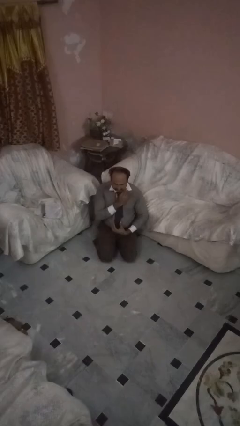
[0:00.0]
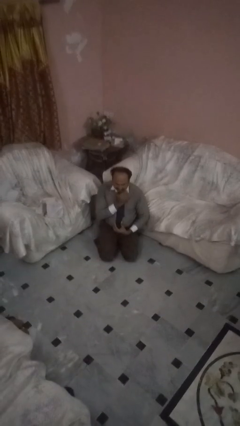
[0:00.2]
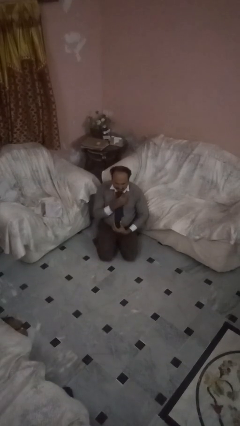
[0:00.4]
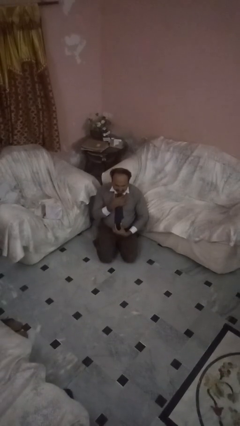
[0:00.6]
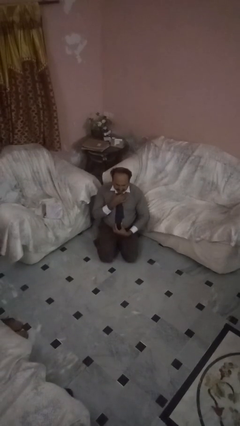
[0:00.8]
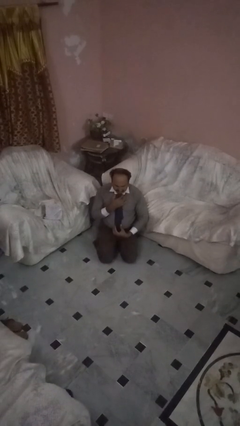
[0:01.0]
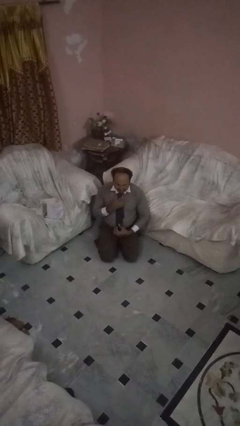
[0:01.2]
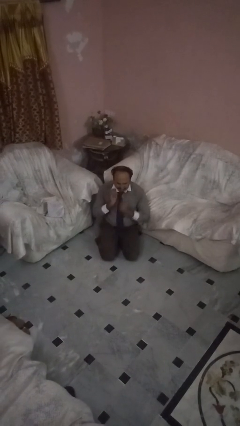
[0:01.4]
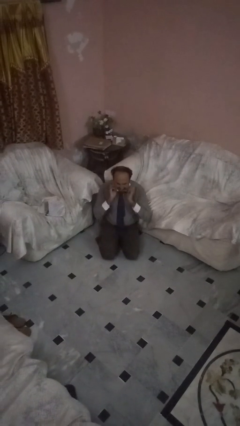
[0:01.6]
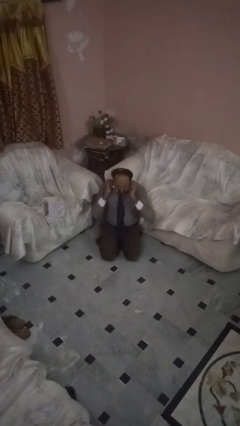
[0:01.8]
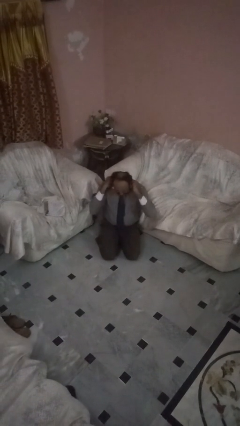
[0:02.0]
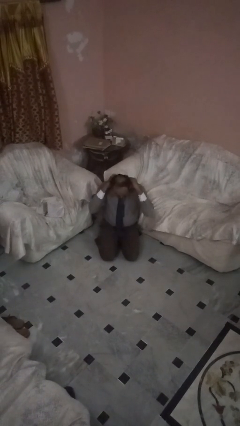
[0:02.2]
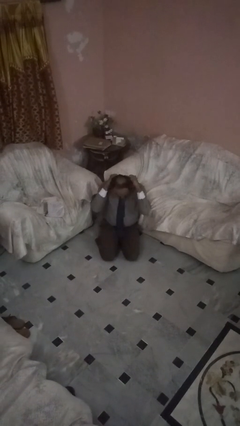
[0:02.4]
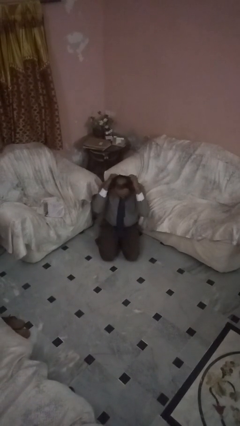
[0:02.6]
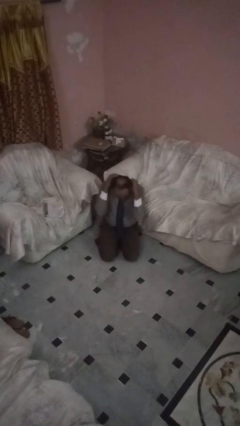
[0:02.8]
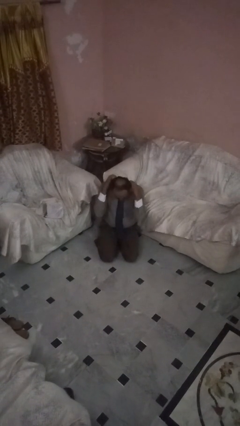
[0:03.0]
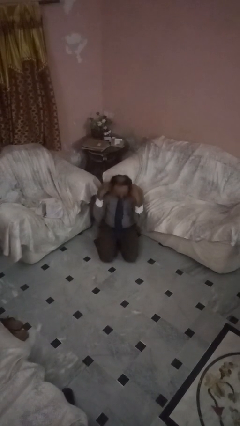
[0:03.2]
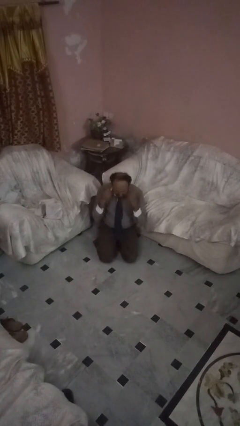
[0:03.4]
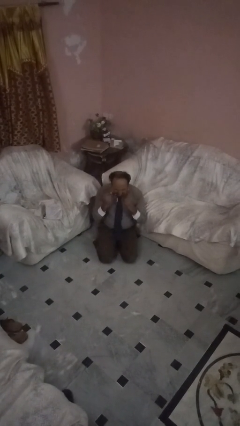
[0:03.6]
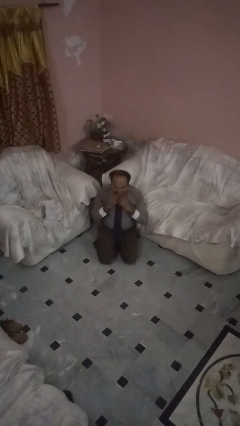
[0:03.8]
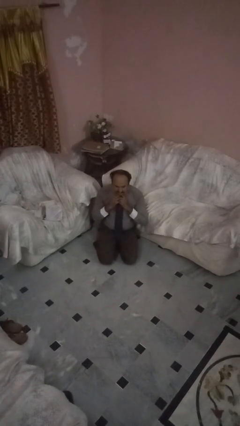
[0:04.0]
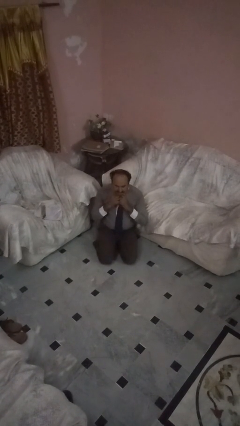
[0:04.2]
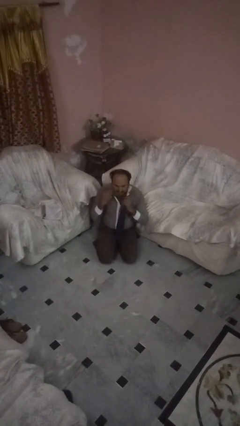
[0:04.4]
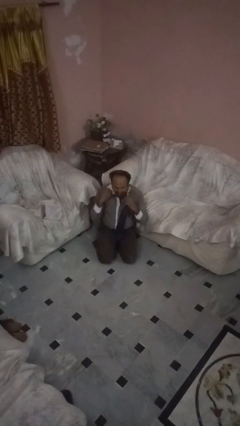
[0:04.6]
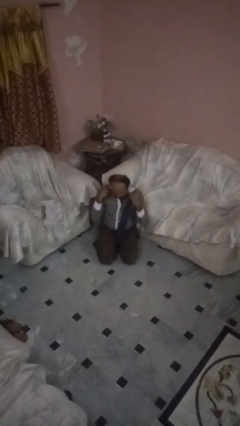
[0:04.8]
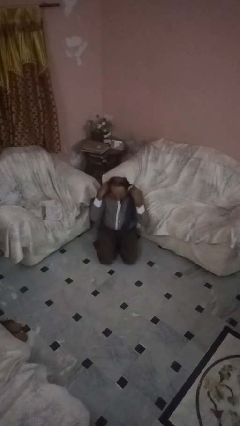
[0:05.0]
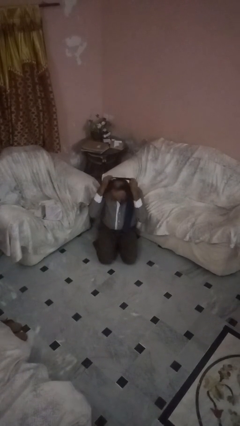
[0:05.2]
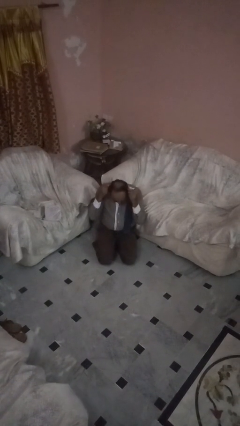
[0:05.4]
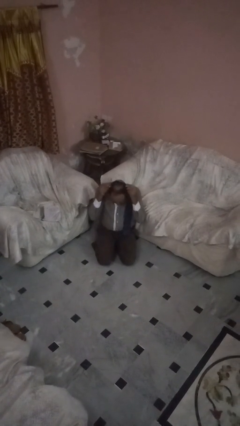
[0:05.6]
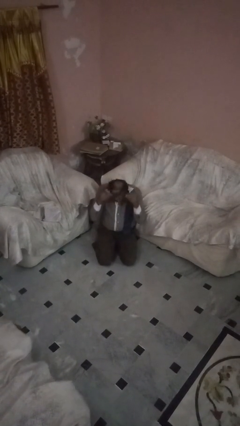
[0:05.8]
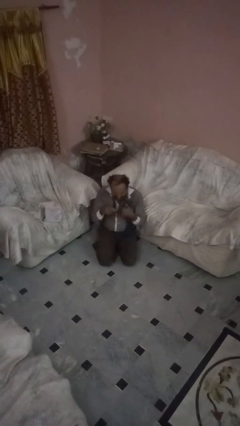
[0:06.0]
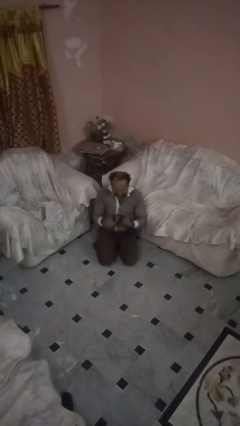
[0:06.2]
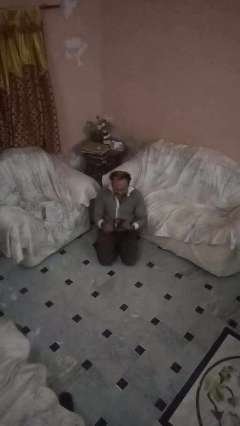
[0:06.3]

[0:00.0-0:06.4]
person takes off necktie

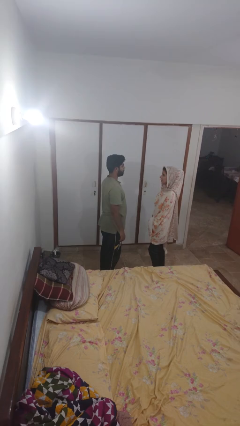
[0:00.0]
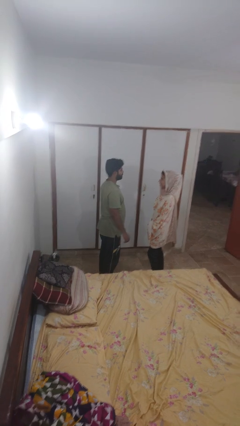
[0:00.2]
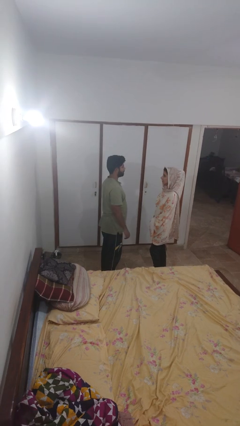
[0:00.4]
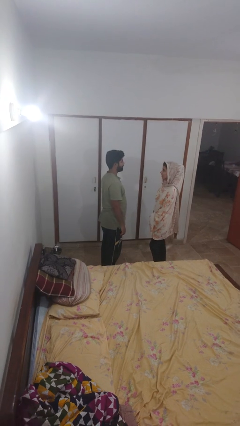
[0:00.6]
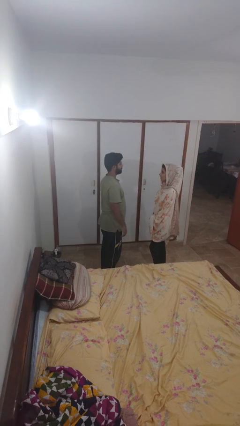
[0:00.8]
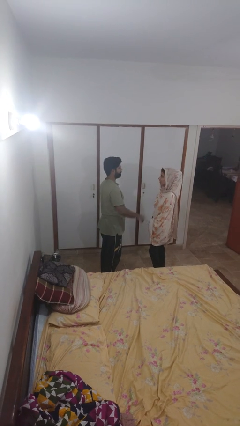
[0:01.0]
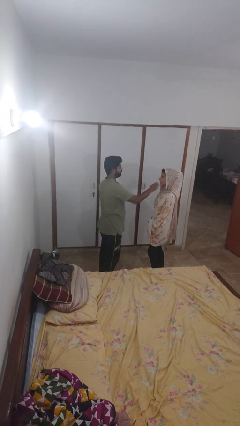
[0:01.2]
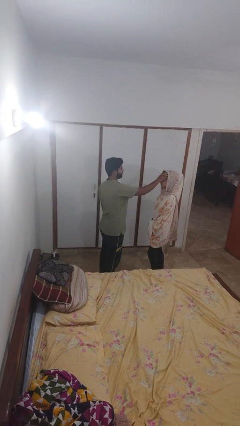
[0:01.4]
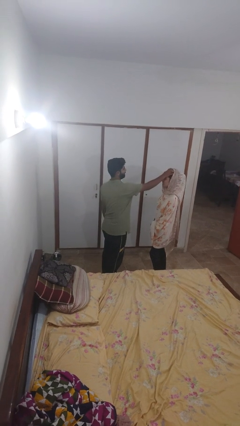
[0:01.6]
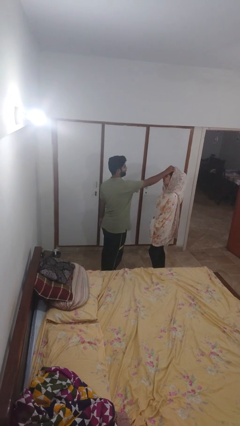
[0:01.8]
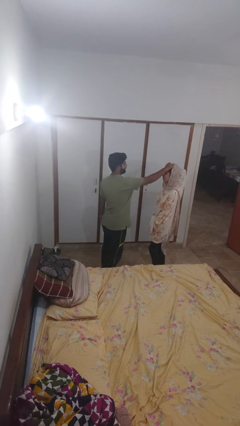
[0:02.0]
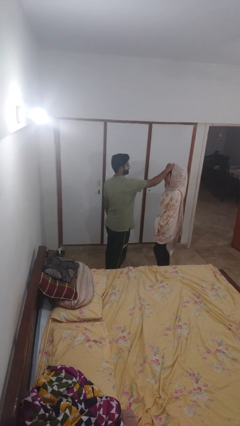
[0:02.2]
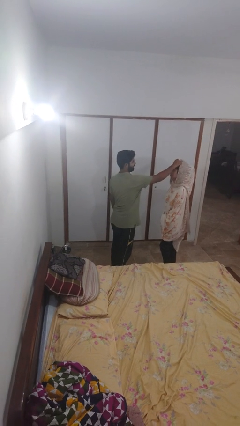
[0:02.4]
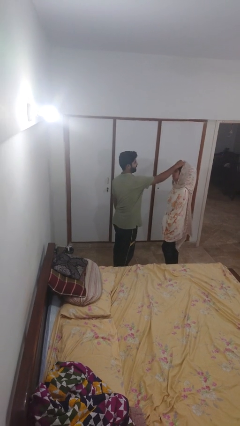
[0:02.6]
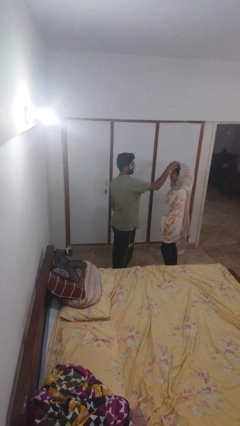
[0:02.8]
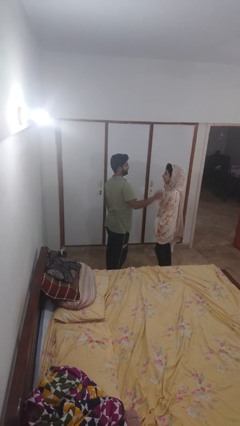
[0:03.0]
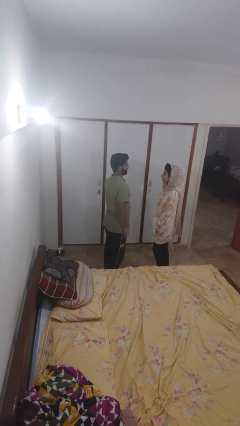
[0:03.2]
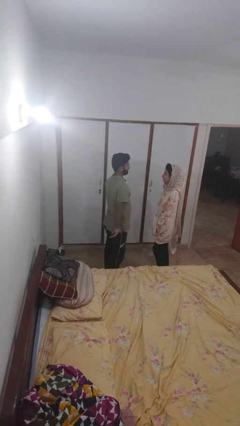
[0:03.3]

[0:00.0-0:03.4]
person grabs person by hair

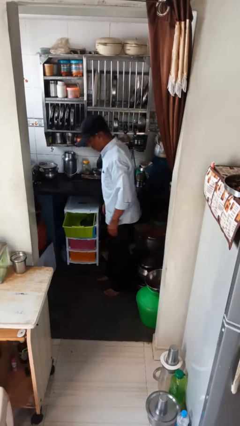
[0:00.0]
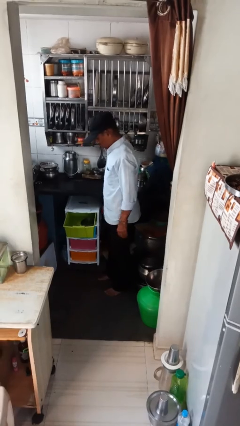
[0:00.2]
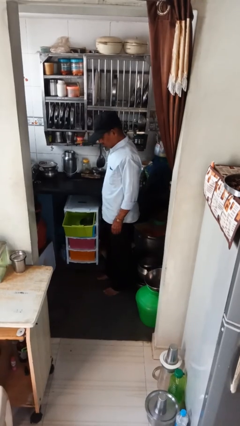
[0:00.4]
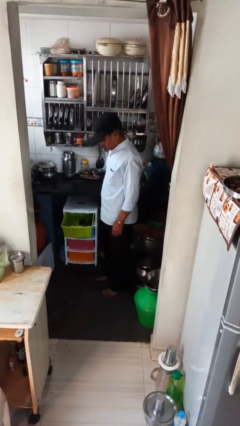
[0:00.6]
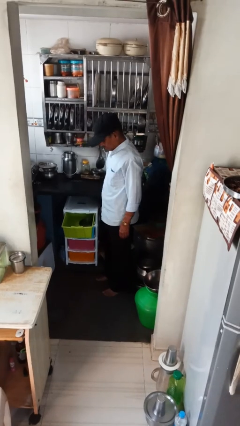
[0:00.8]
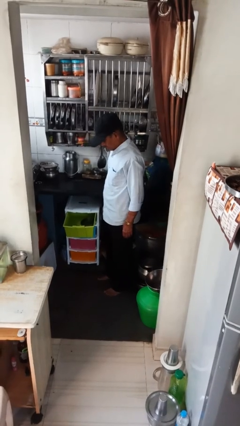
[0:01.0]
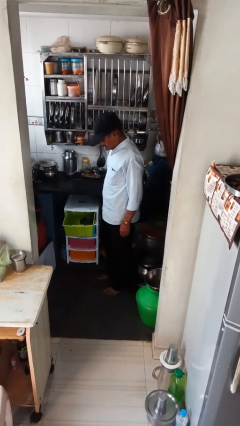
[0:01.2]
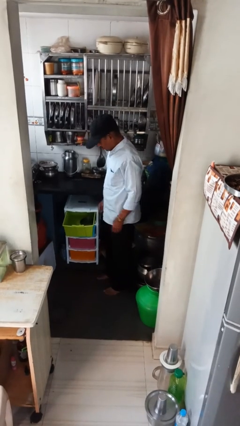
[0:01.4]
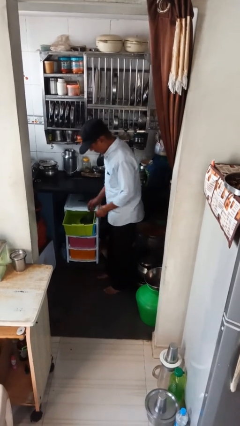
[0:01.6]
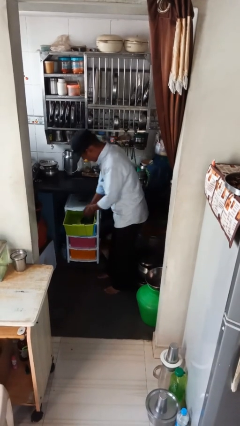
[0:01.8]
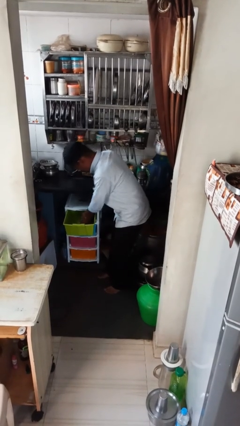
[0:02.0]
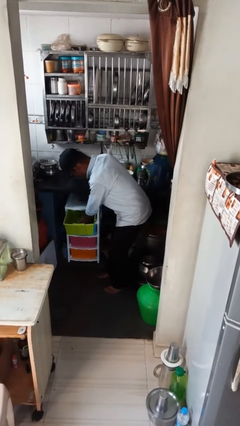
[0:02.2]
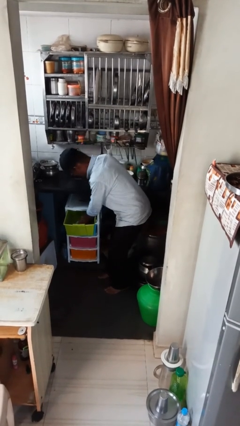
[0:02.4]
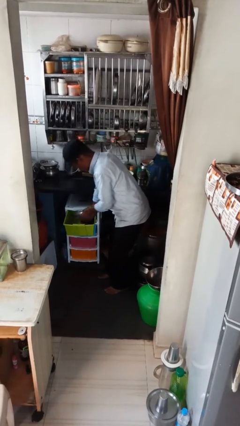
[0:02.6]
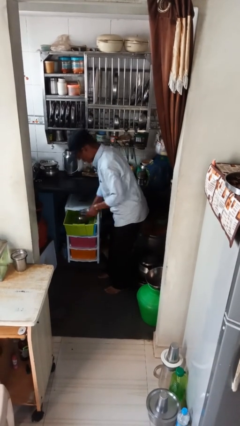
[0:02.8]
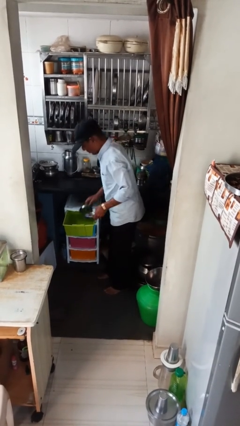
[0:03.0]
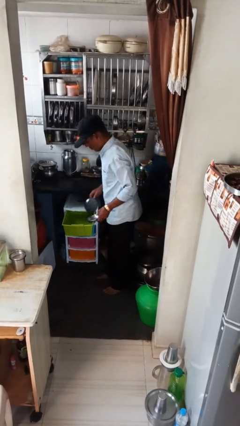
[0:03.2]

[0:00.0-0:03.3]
person takes object from cabinet

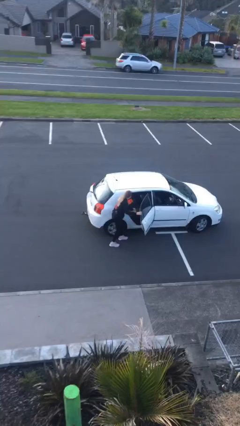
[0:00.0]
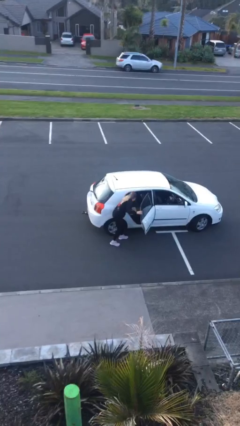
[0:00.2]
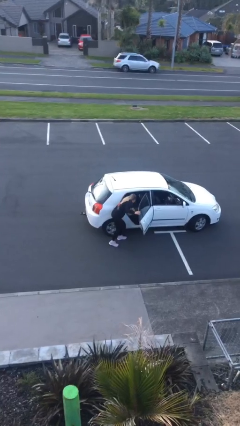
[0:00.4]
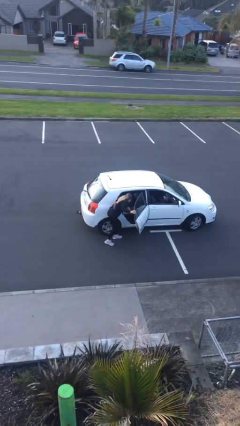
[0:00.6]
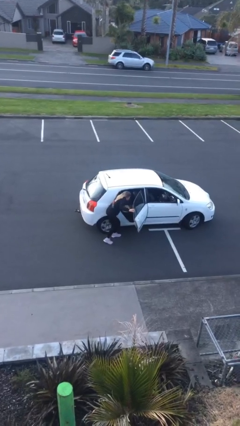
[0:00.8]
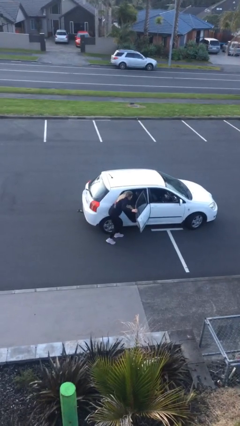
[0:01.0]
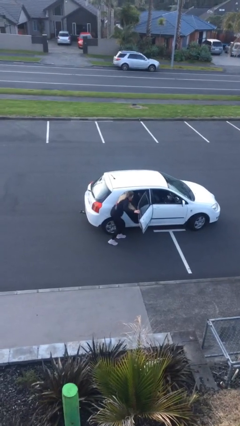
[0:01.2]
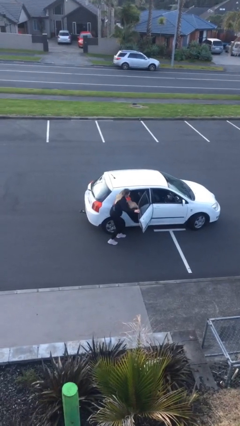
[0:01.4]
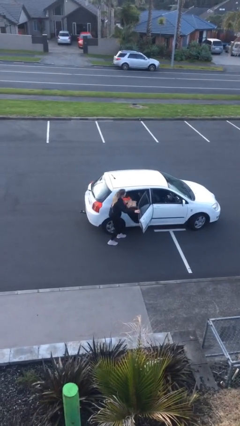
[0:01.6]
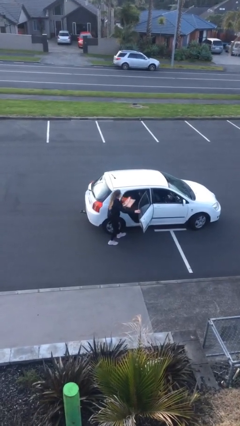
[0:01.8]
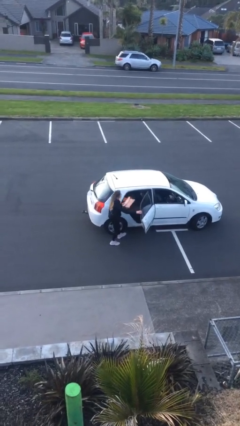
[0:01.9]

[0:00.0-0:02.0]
person unloads car

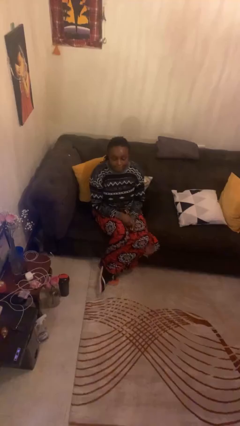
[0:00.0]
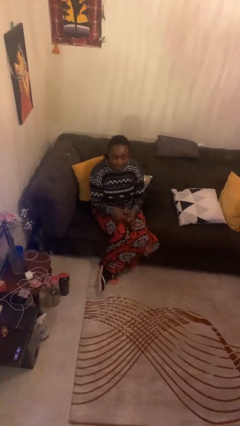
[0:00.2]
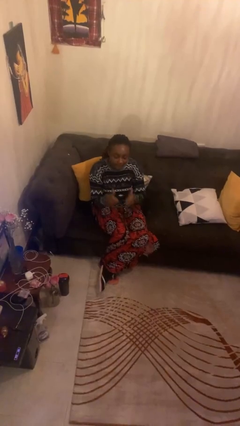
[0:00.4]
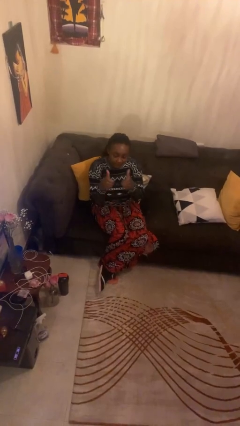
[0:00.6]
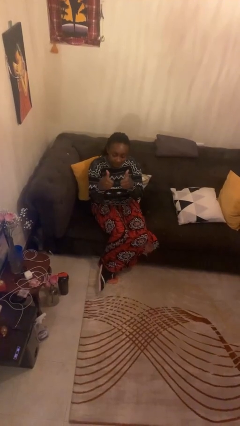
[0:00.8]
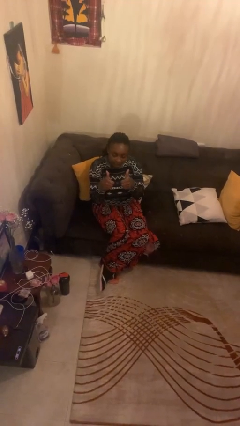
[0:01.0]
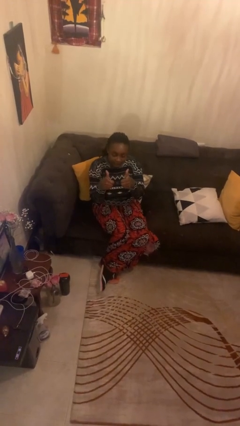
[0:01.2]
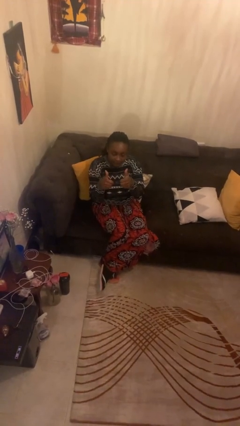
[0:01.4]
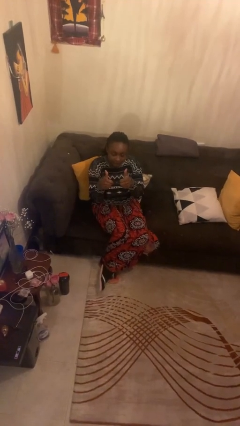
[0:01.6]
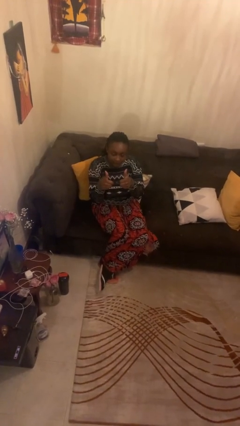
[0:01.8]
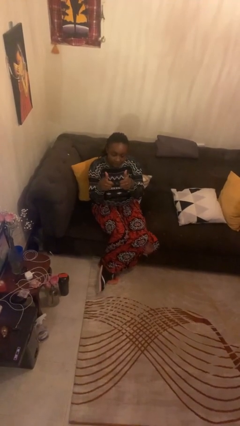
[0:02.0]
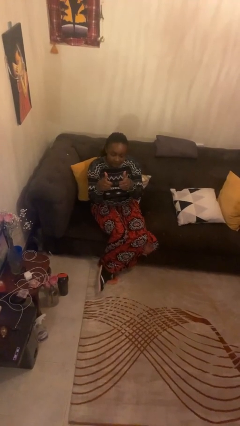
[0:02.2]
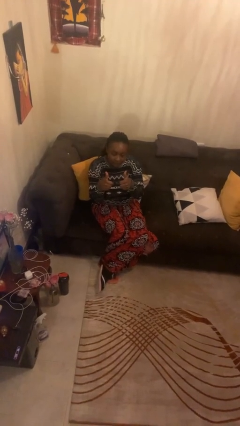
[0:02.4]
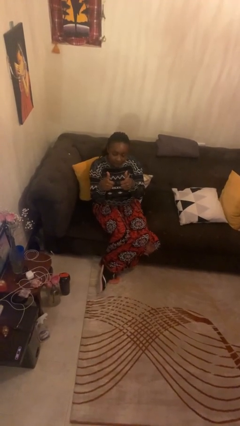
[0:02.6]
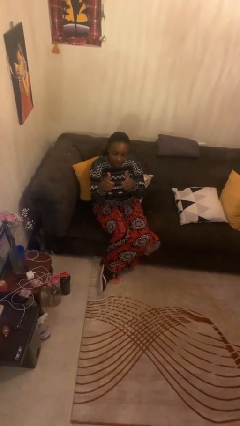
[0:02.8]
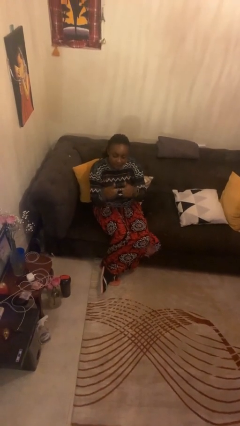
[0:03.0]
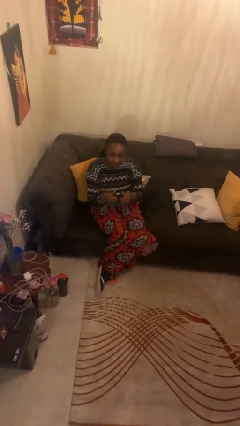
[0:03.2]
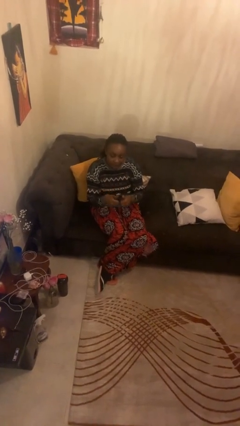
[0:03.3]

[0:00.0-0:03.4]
person gestures thumbs up
